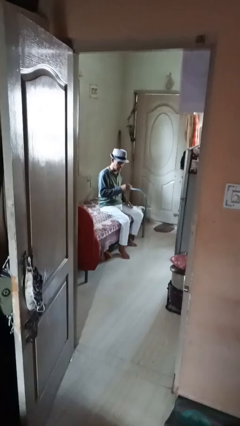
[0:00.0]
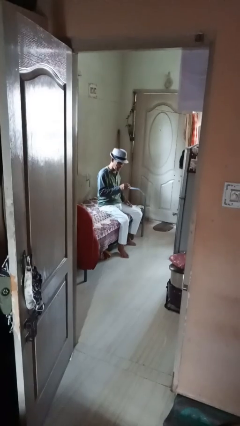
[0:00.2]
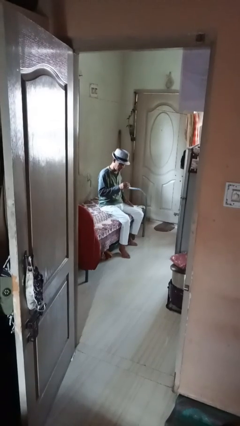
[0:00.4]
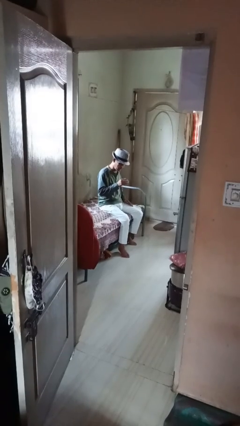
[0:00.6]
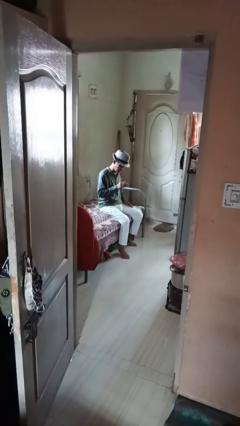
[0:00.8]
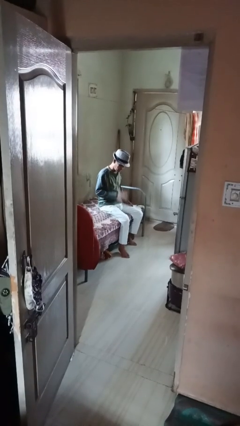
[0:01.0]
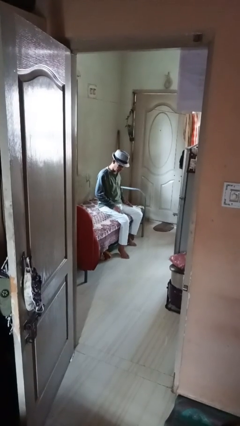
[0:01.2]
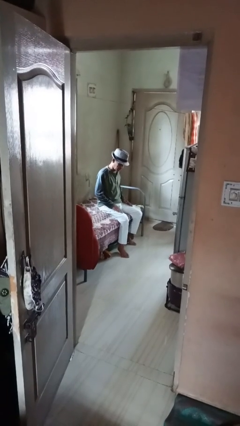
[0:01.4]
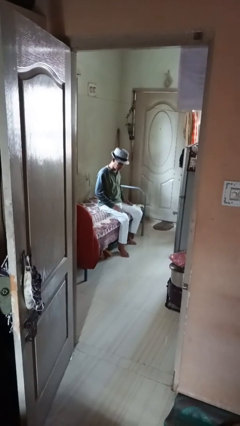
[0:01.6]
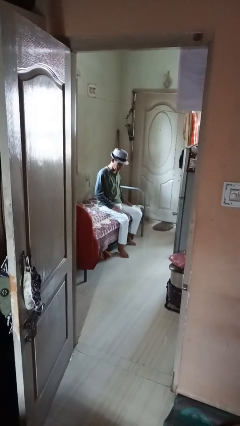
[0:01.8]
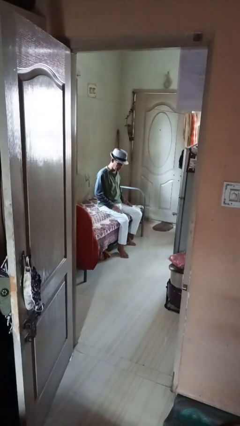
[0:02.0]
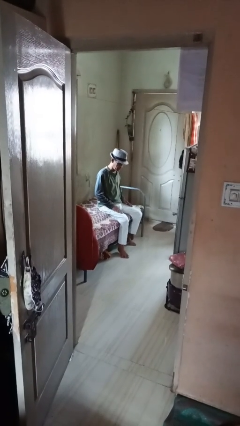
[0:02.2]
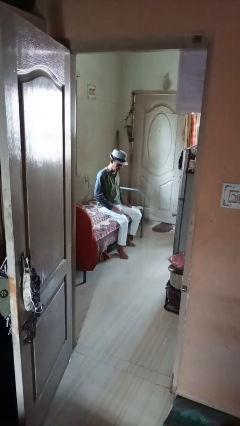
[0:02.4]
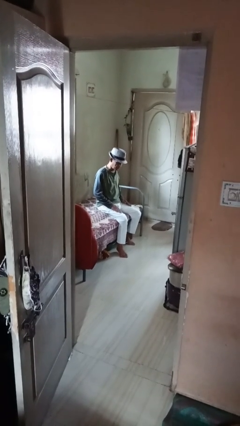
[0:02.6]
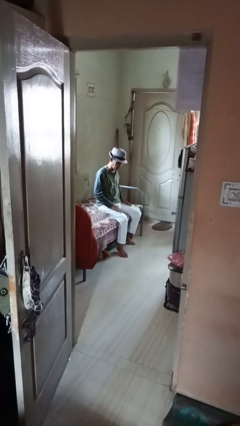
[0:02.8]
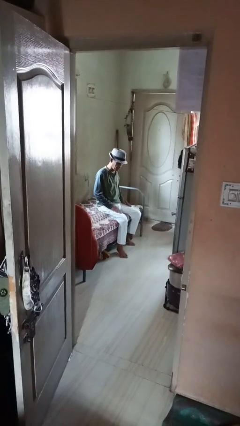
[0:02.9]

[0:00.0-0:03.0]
person swats bug

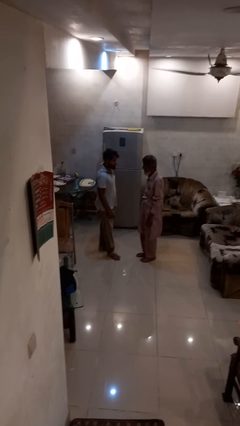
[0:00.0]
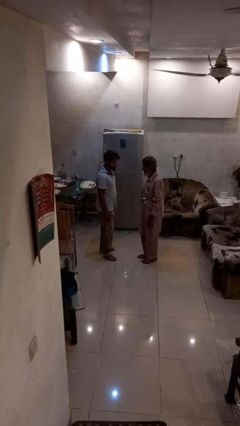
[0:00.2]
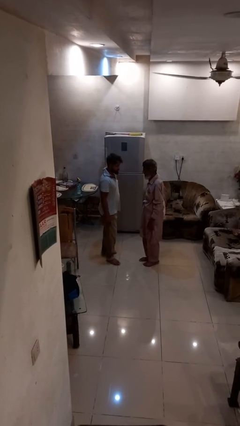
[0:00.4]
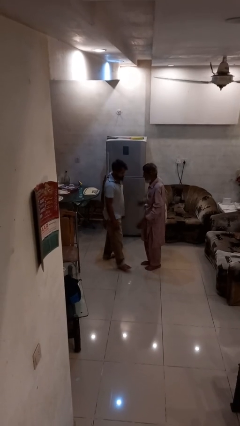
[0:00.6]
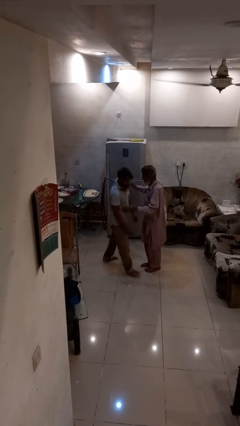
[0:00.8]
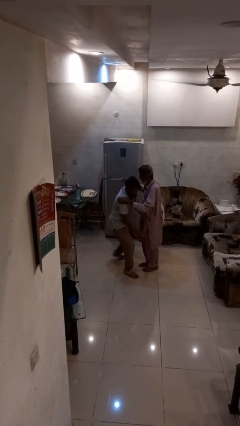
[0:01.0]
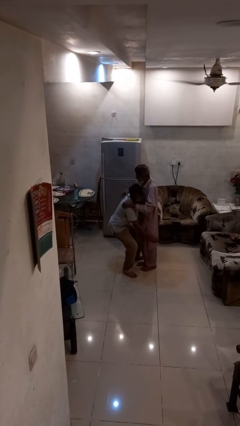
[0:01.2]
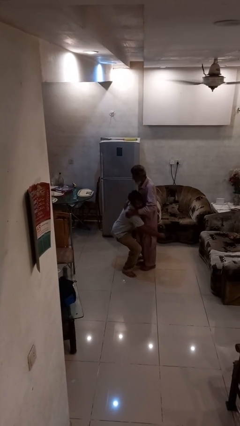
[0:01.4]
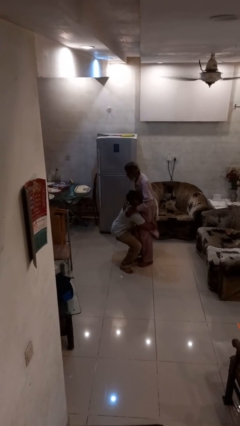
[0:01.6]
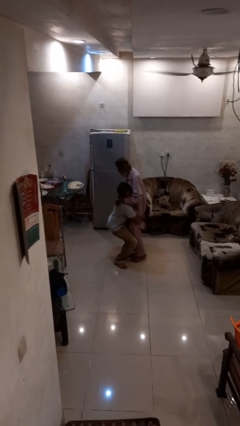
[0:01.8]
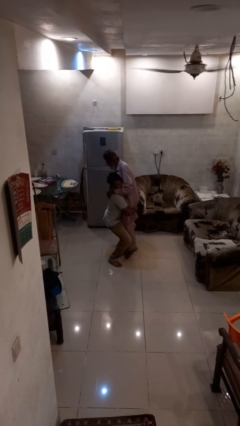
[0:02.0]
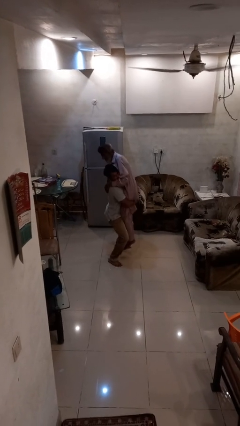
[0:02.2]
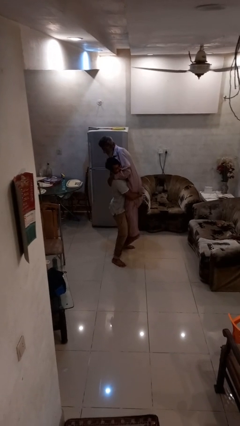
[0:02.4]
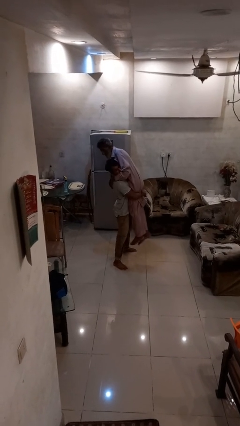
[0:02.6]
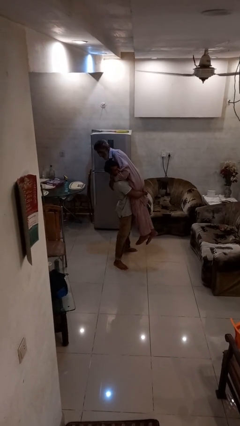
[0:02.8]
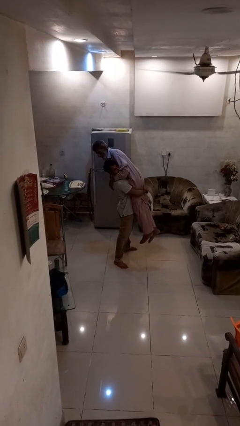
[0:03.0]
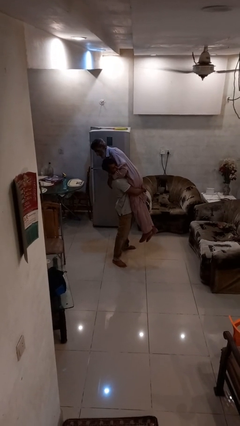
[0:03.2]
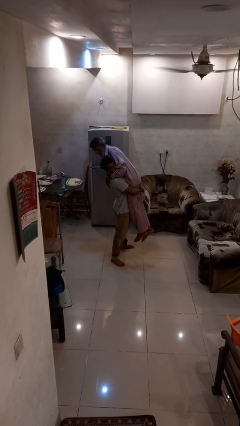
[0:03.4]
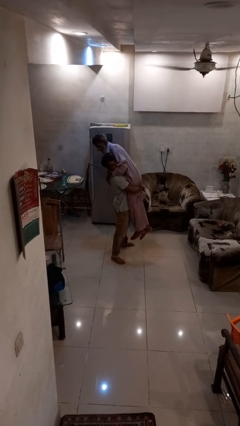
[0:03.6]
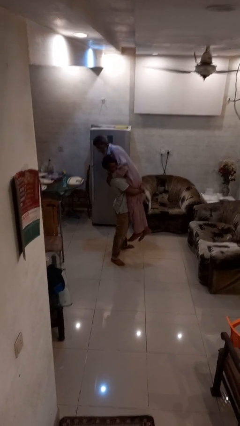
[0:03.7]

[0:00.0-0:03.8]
person picks up person

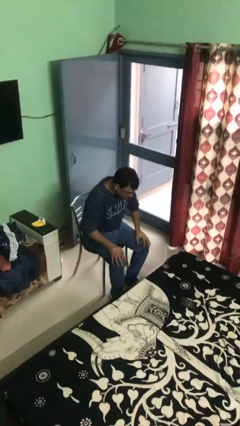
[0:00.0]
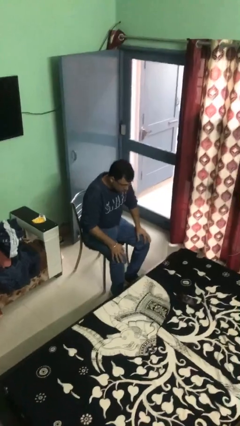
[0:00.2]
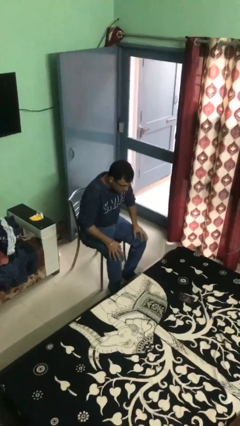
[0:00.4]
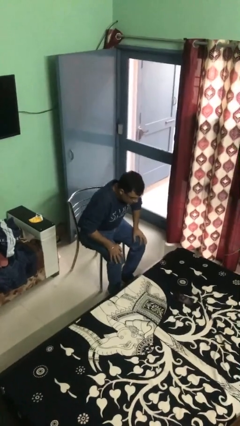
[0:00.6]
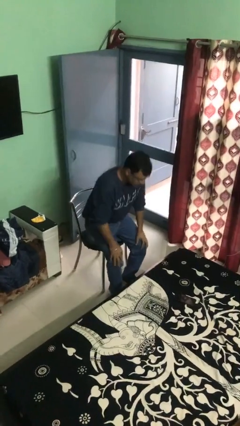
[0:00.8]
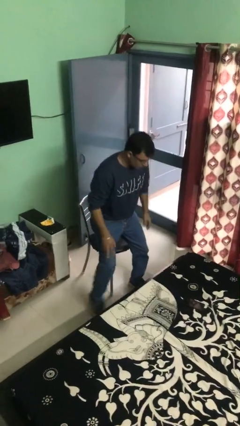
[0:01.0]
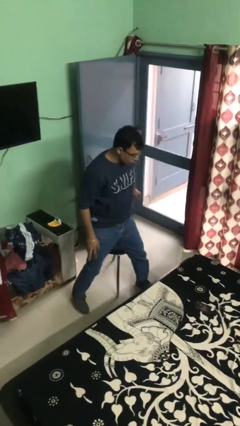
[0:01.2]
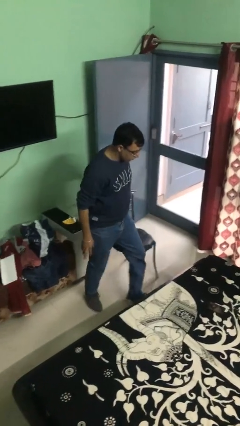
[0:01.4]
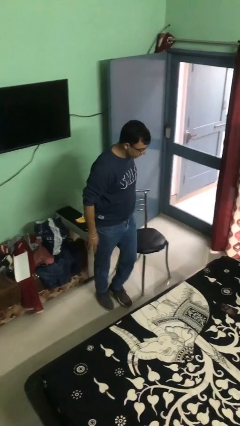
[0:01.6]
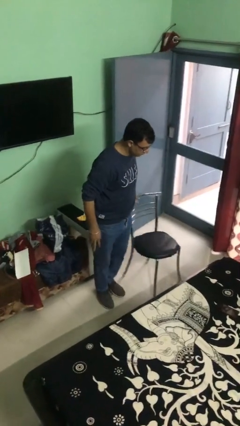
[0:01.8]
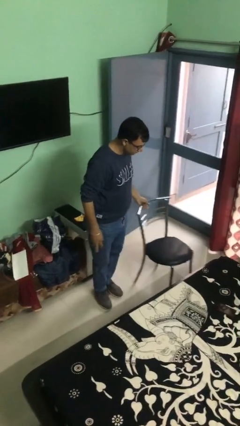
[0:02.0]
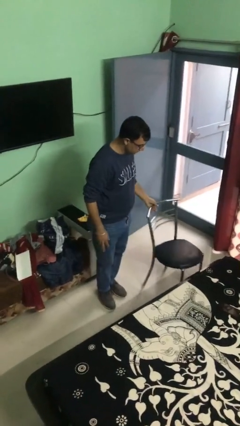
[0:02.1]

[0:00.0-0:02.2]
person stands up

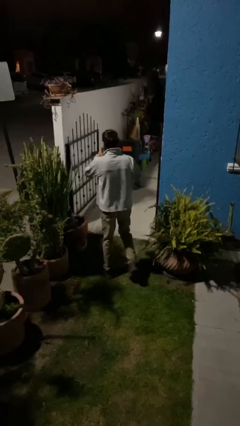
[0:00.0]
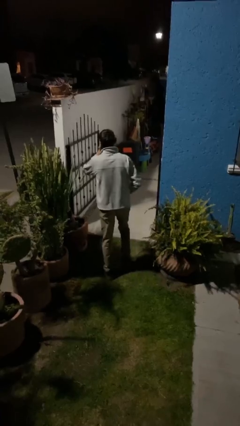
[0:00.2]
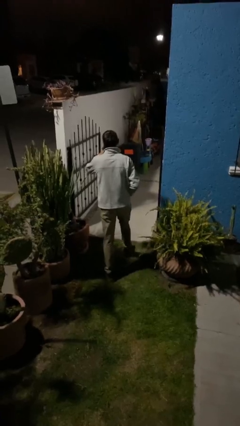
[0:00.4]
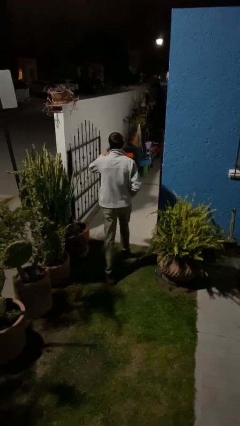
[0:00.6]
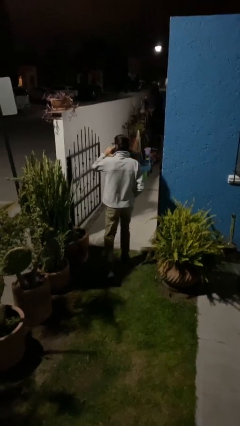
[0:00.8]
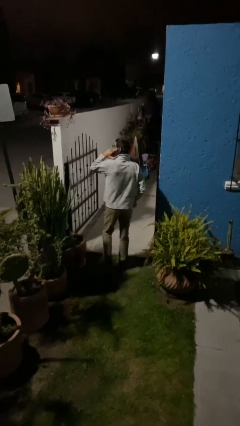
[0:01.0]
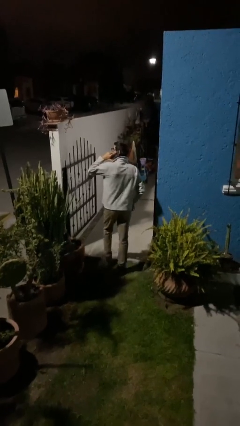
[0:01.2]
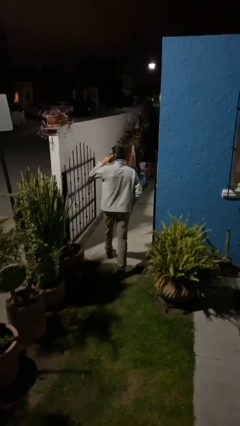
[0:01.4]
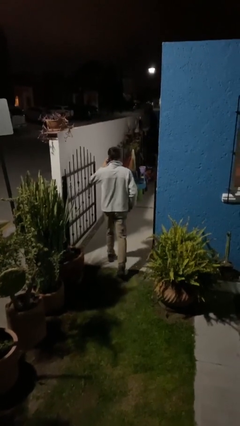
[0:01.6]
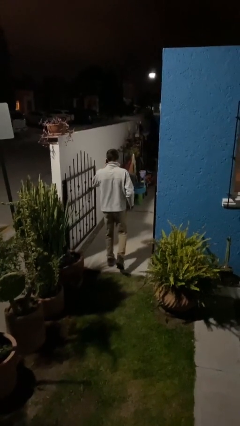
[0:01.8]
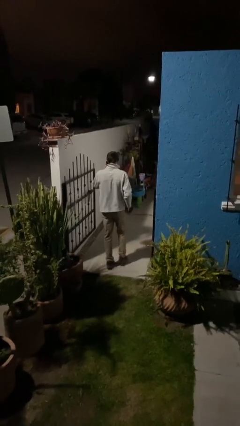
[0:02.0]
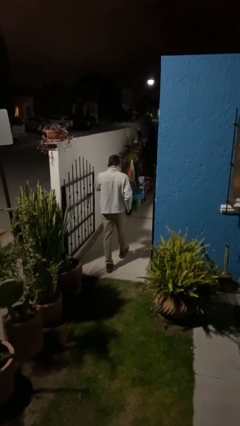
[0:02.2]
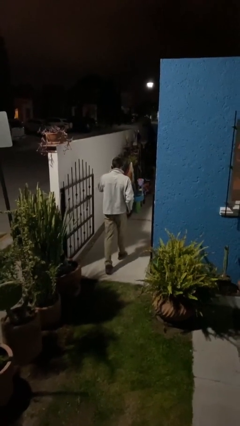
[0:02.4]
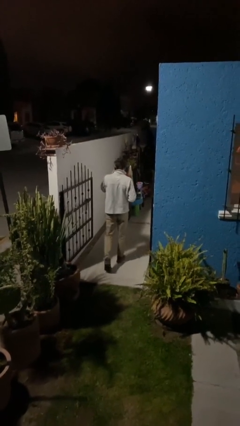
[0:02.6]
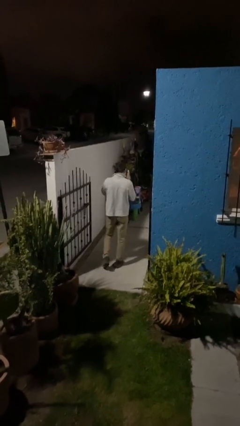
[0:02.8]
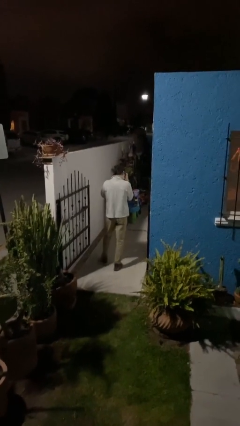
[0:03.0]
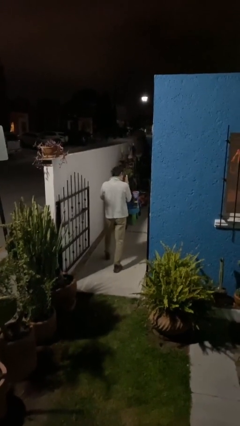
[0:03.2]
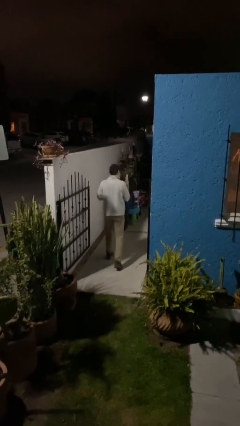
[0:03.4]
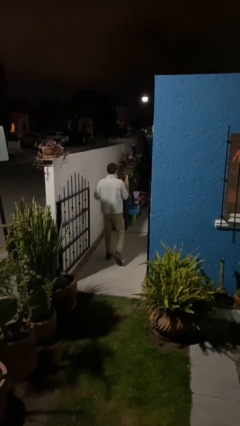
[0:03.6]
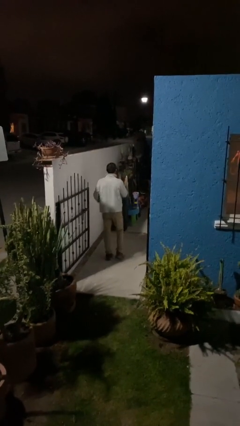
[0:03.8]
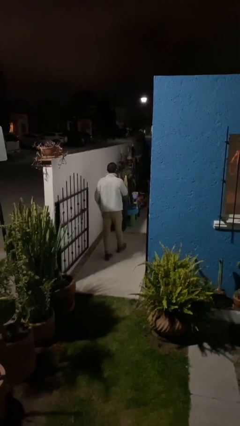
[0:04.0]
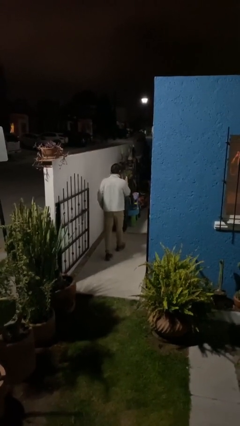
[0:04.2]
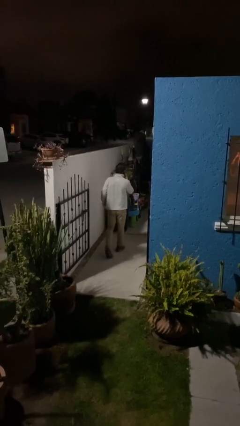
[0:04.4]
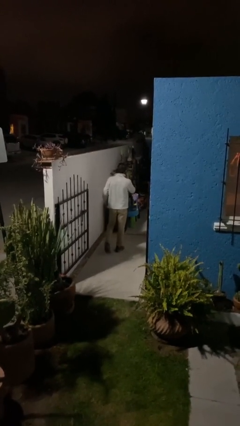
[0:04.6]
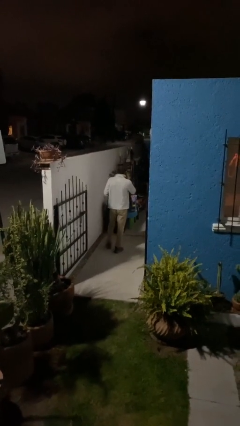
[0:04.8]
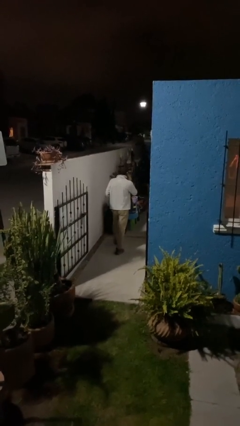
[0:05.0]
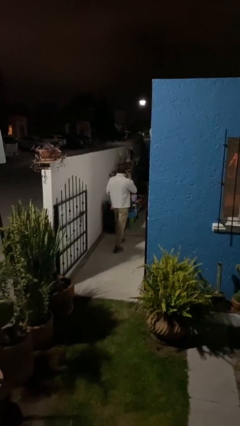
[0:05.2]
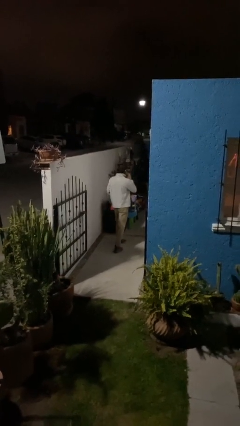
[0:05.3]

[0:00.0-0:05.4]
person exits scene through structure

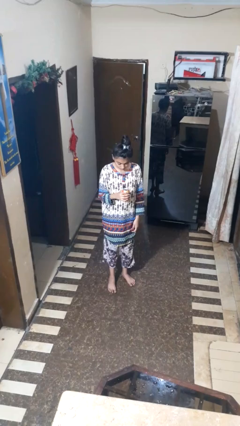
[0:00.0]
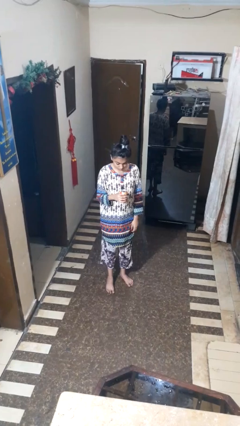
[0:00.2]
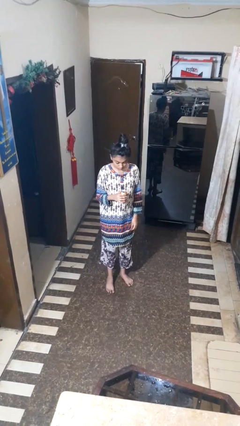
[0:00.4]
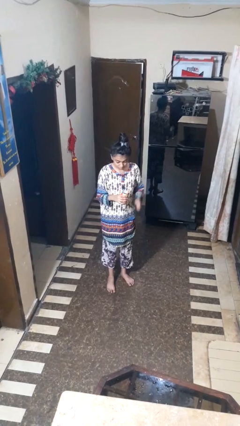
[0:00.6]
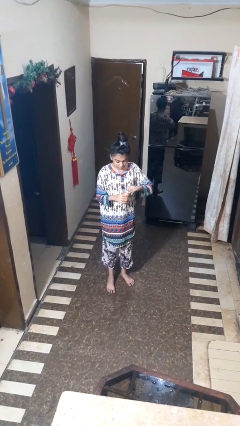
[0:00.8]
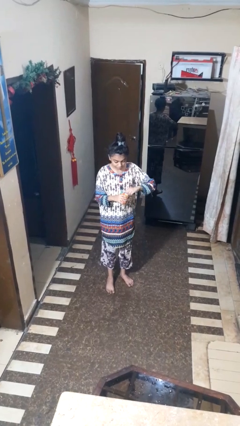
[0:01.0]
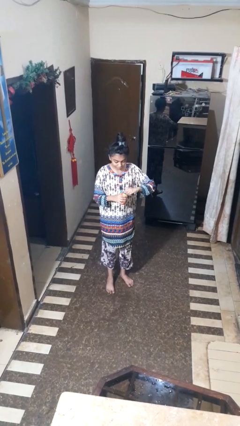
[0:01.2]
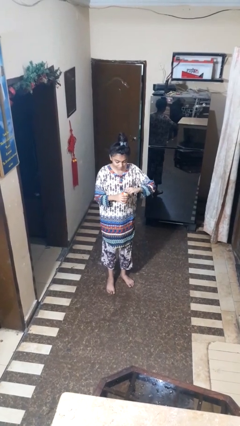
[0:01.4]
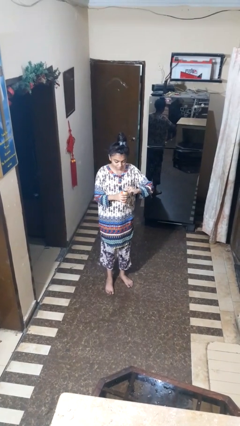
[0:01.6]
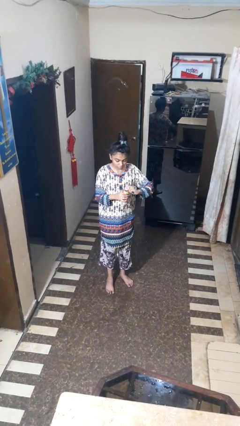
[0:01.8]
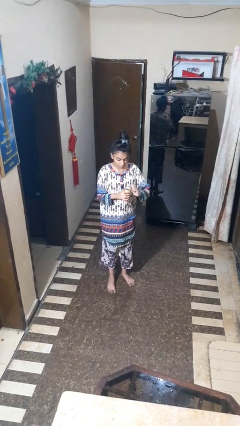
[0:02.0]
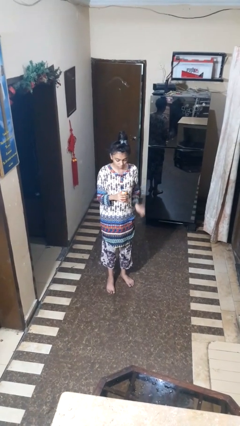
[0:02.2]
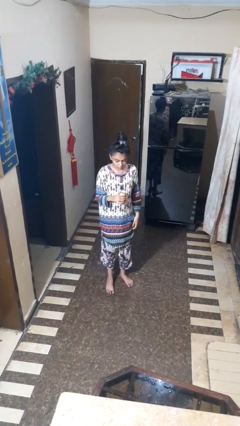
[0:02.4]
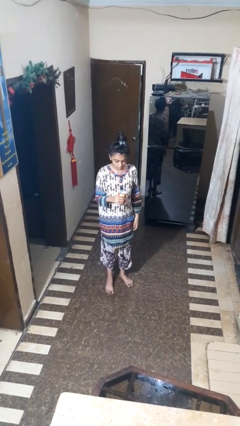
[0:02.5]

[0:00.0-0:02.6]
person opens beverage can

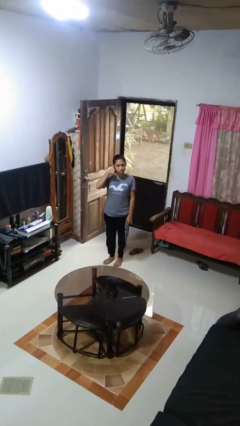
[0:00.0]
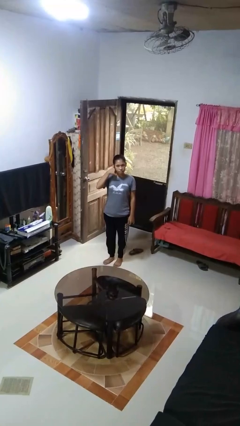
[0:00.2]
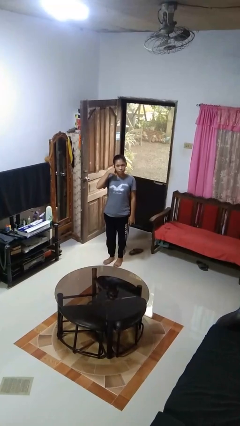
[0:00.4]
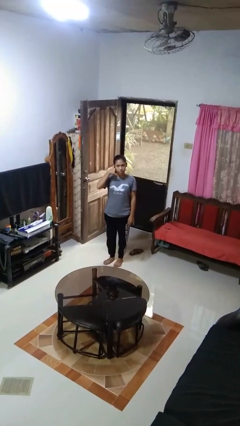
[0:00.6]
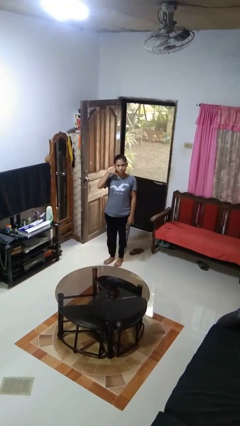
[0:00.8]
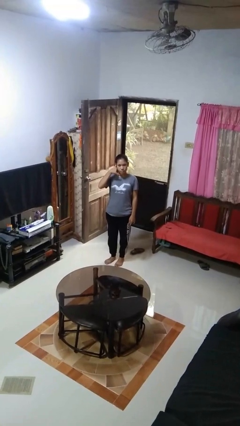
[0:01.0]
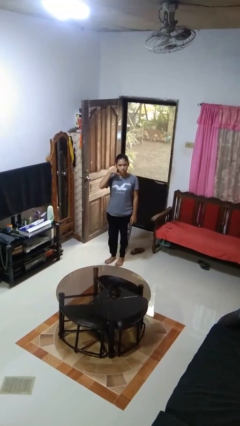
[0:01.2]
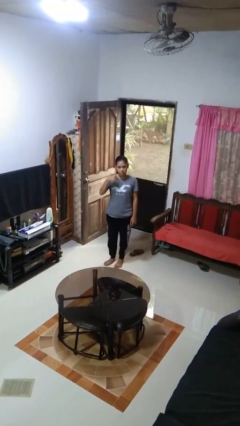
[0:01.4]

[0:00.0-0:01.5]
person gestures call me
